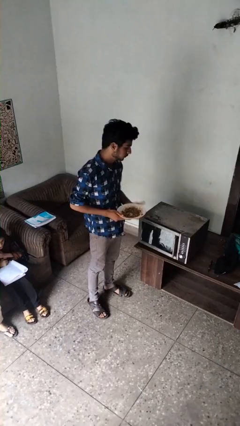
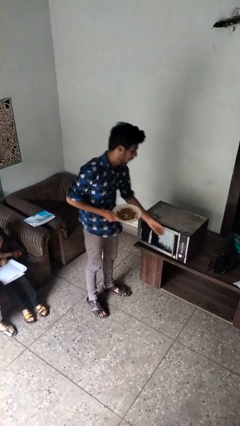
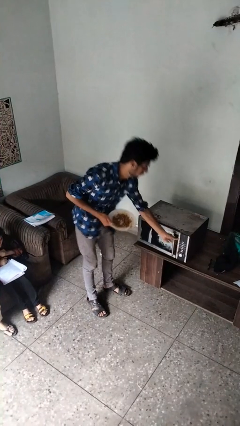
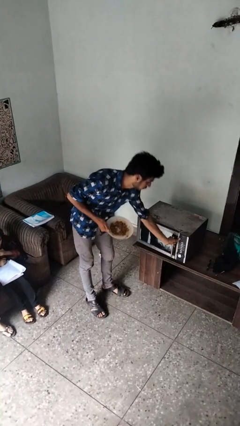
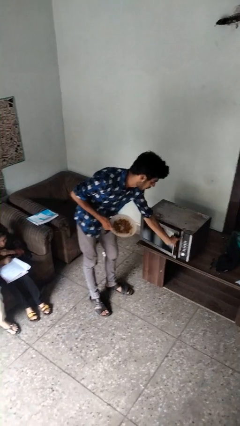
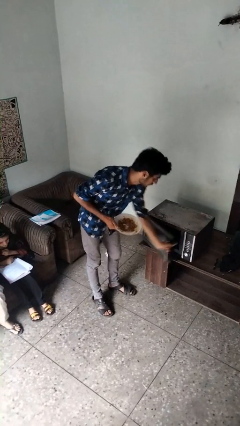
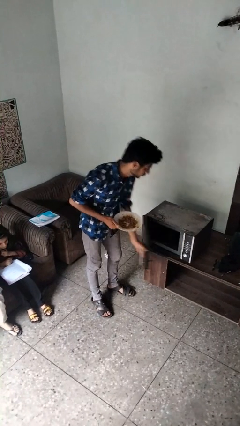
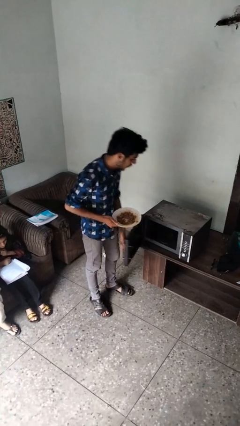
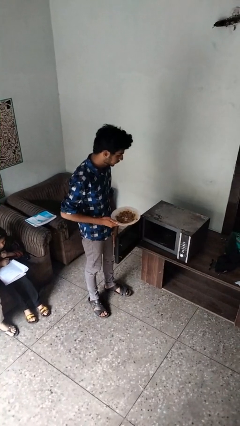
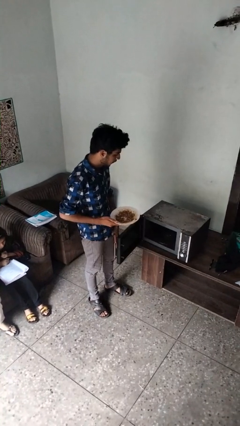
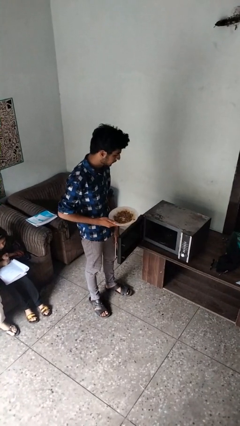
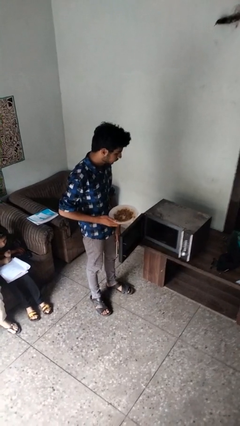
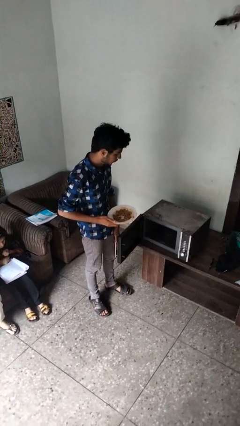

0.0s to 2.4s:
person opens microwave

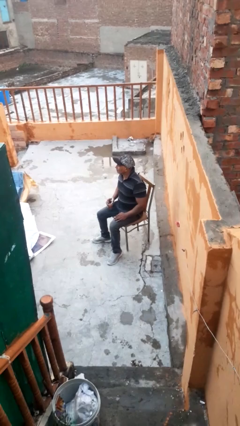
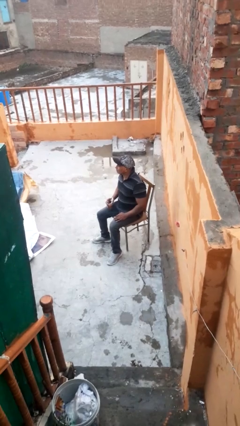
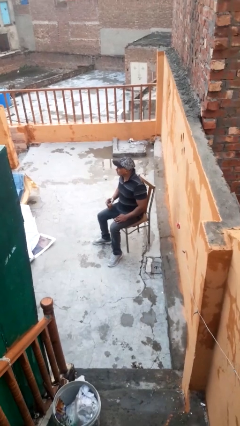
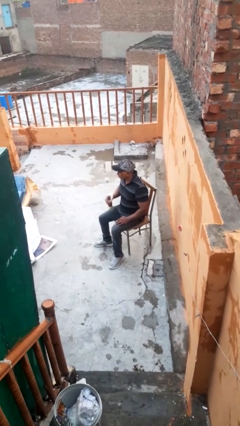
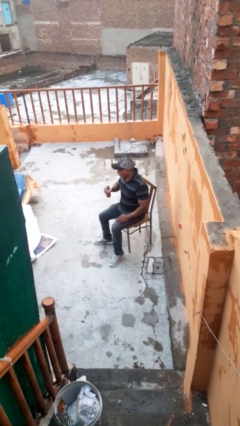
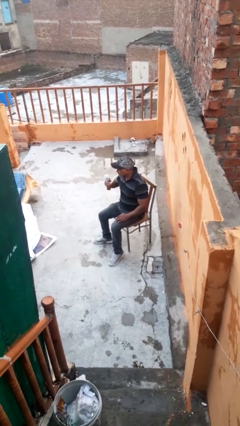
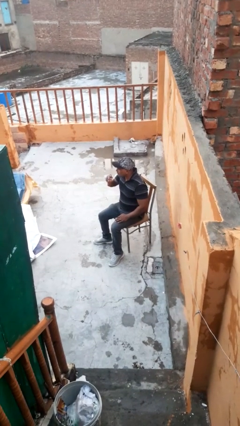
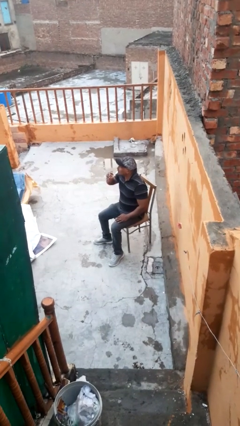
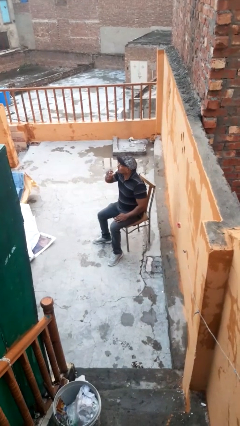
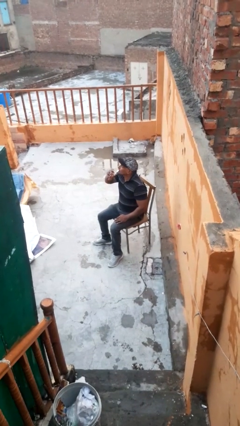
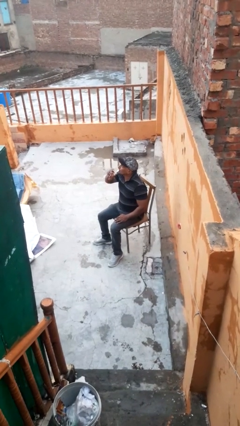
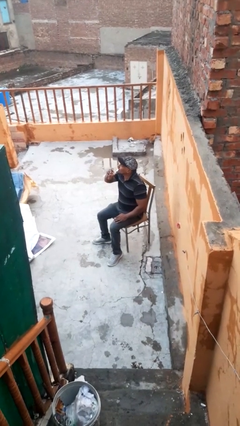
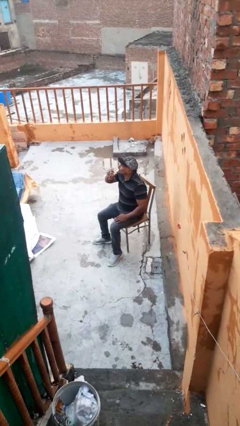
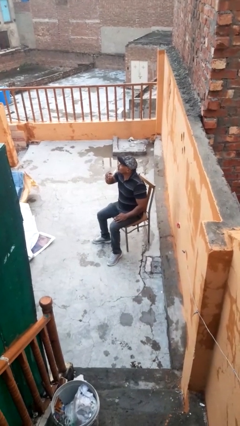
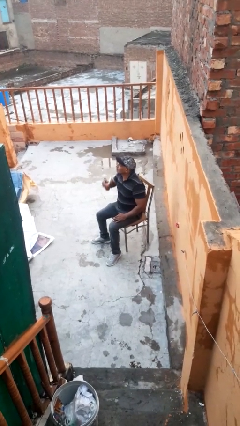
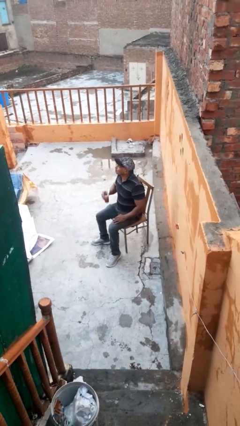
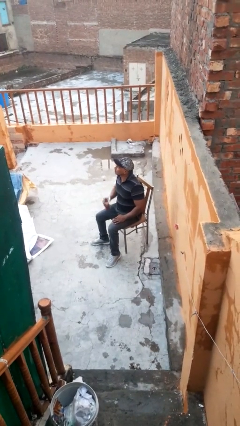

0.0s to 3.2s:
person drinks from straw

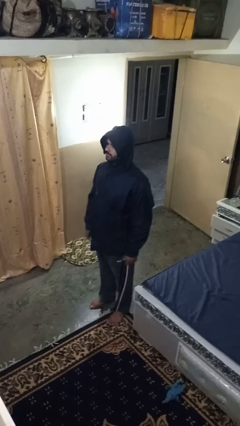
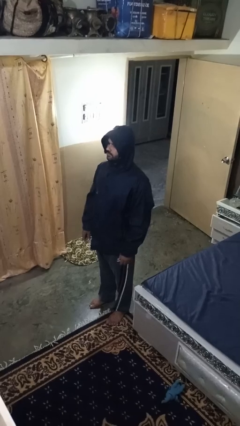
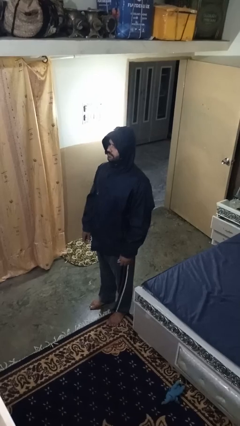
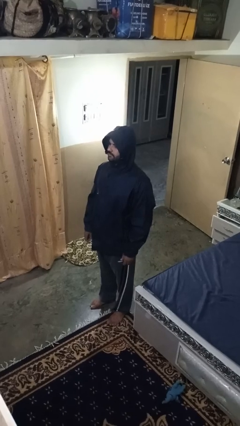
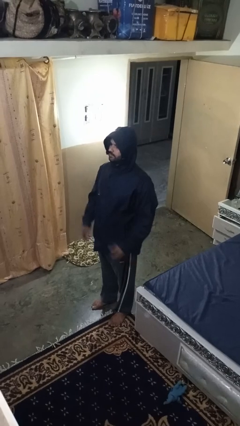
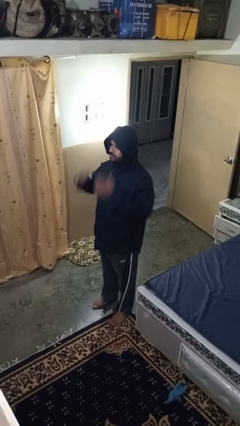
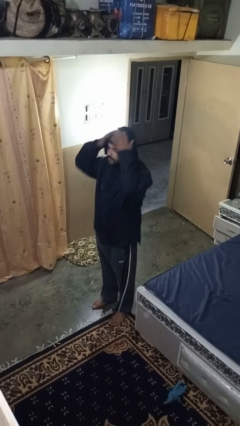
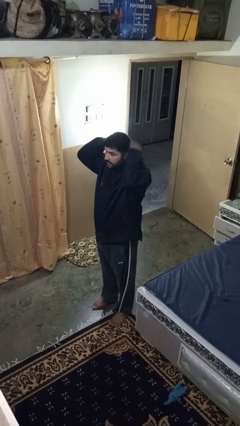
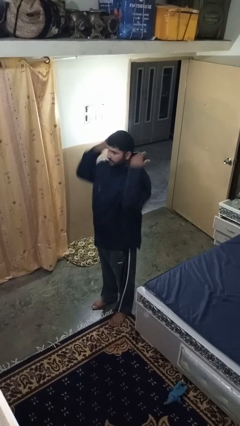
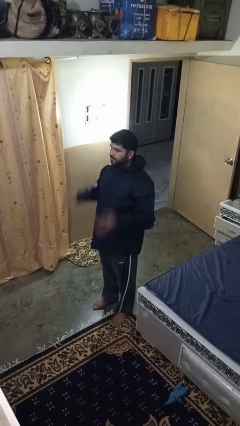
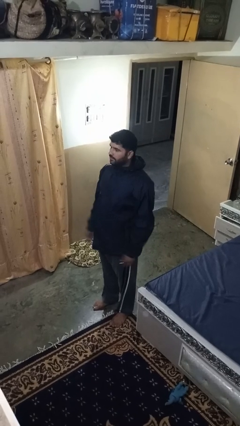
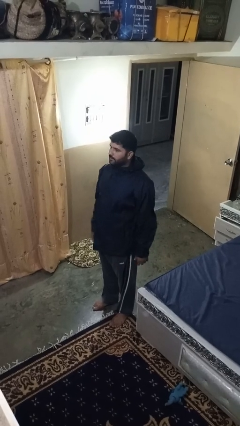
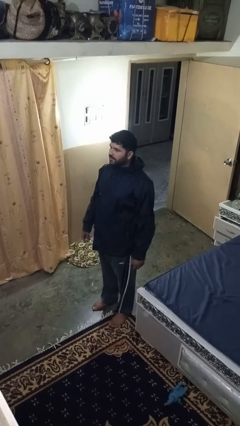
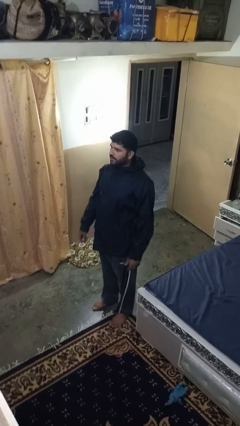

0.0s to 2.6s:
person takes off hoodie

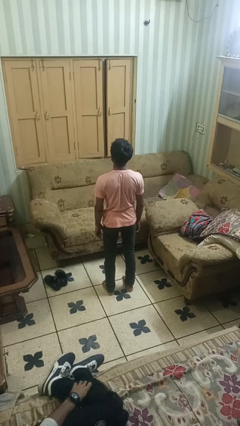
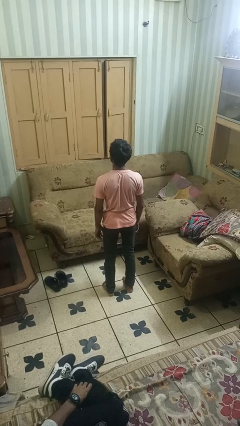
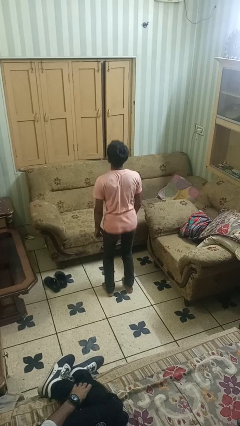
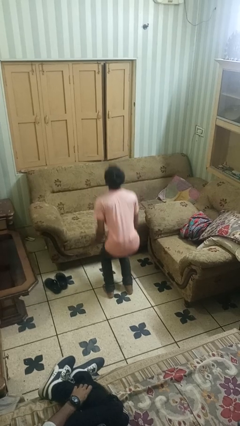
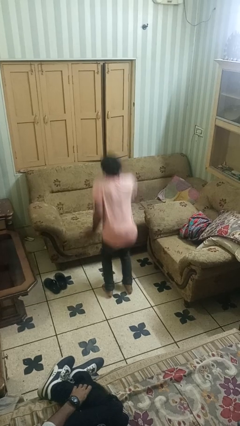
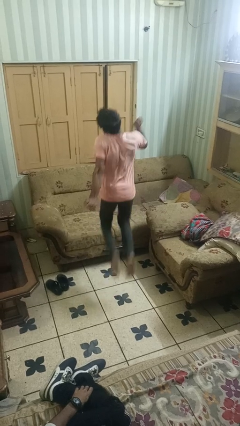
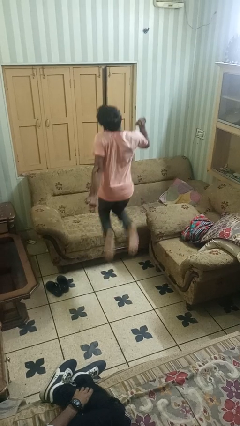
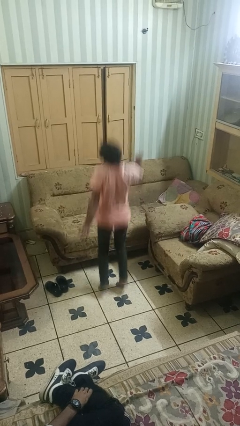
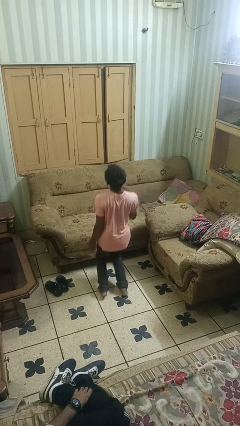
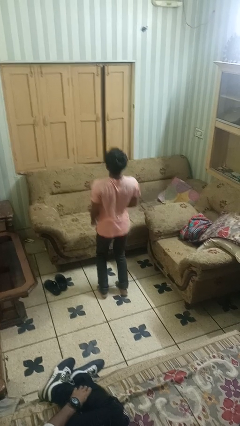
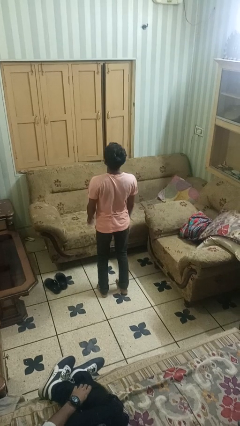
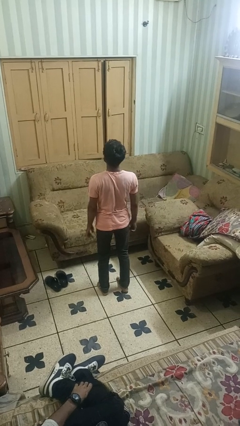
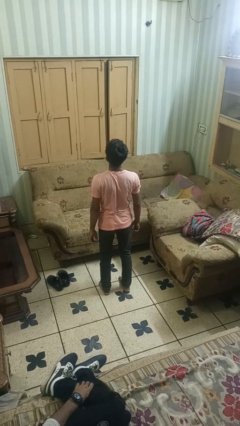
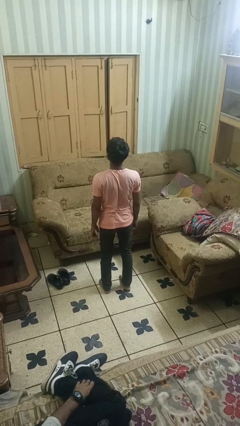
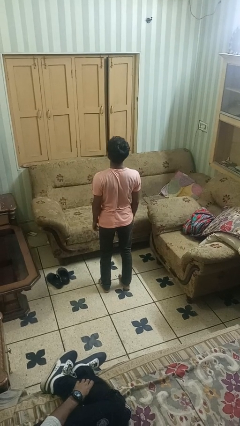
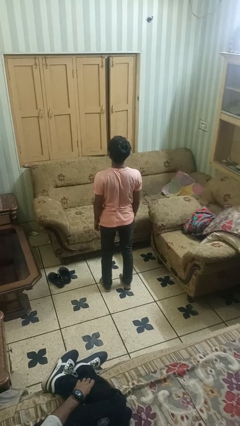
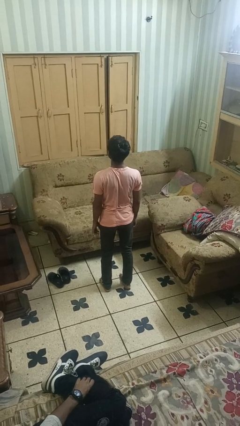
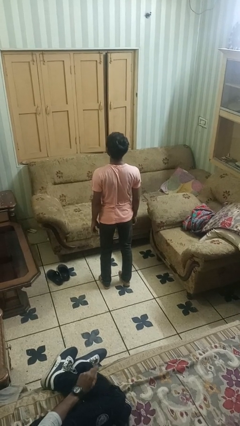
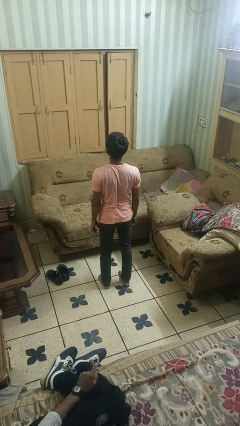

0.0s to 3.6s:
person jumps

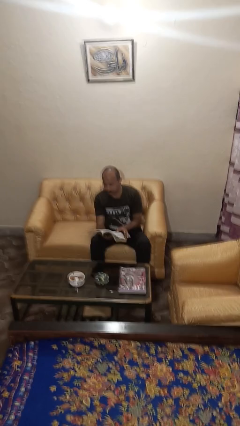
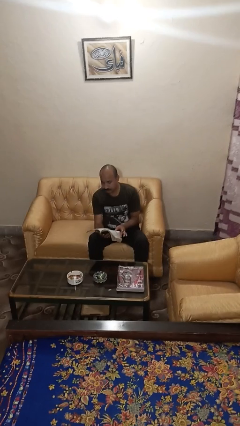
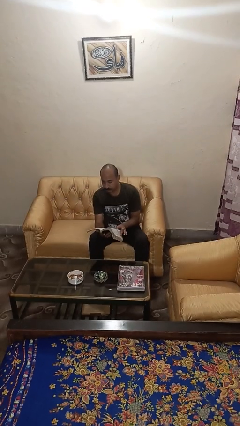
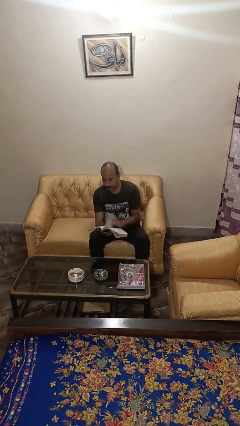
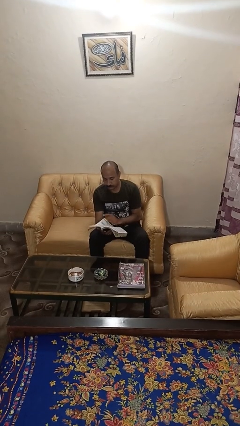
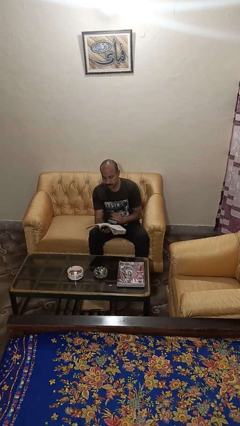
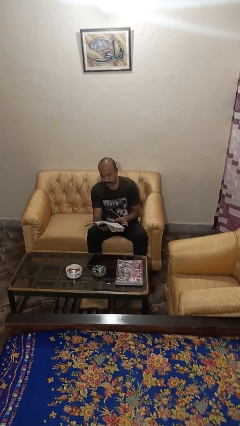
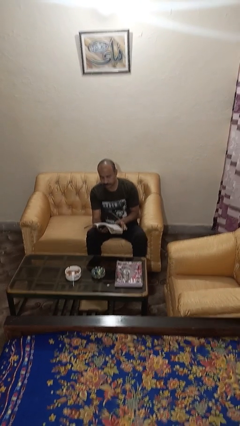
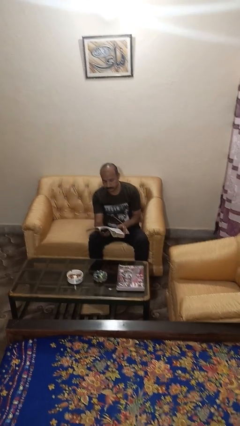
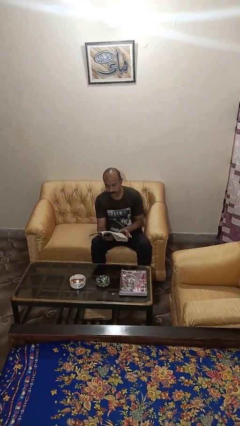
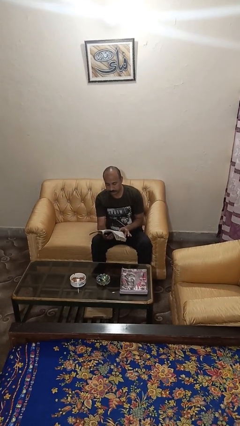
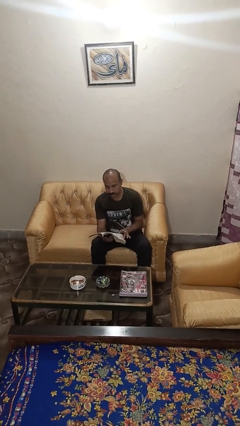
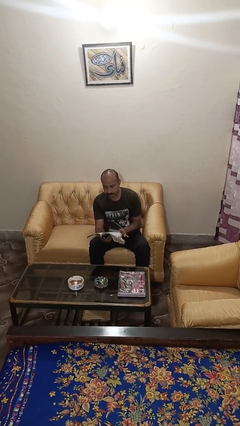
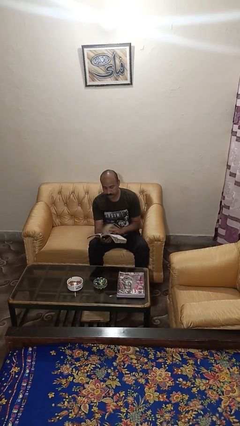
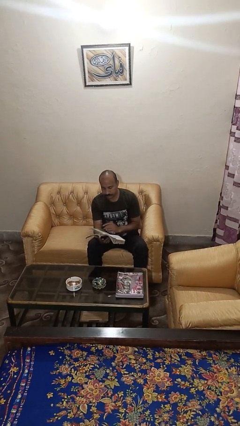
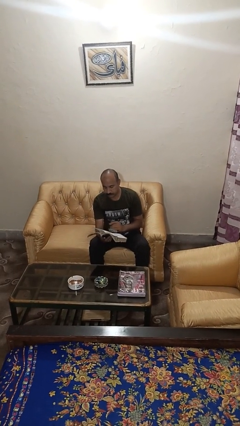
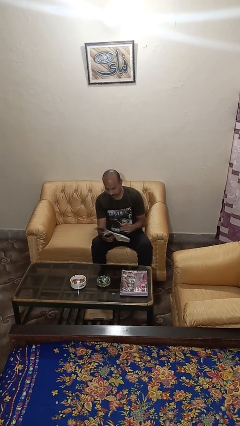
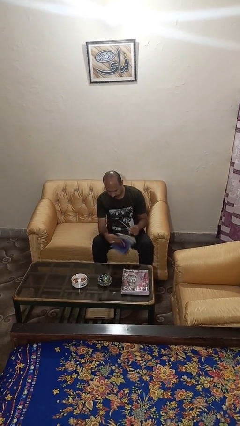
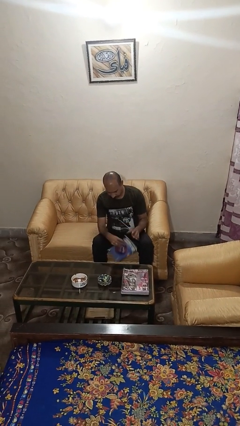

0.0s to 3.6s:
person reads book

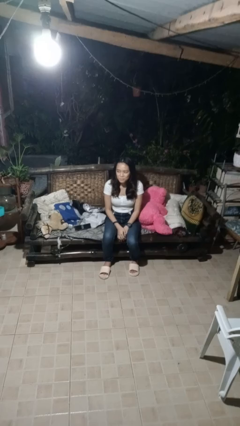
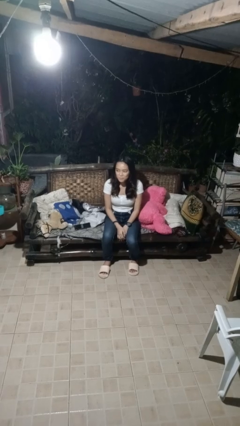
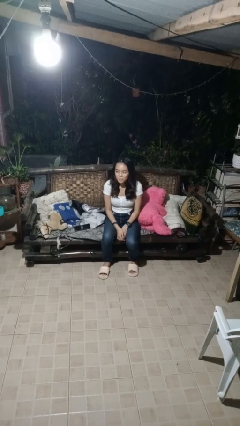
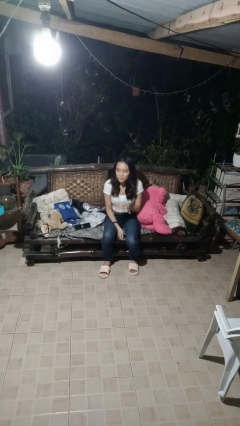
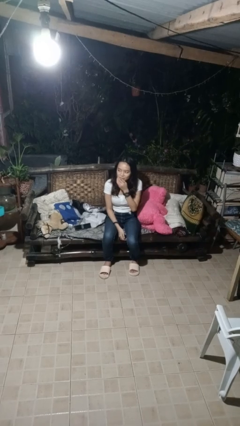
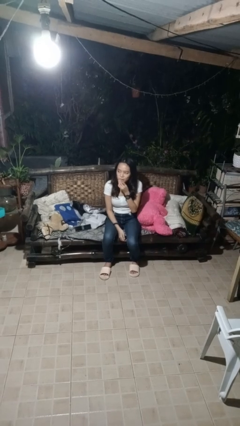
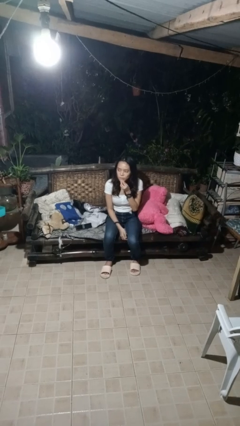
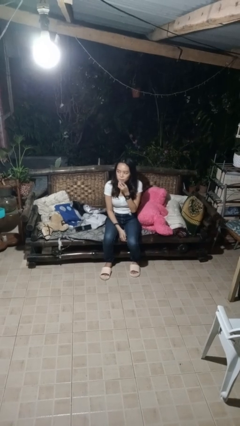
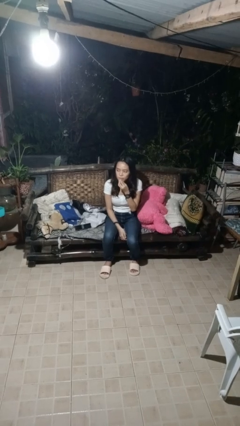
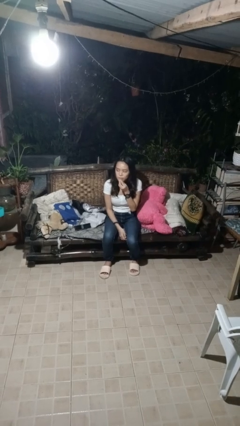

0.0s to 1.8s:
person strokes chin

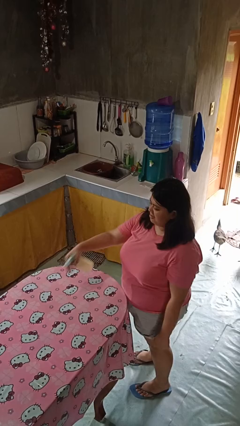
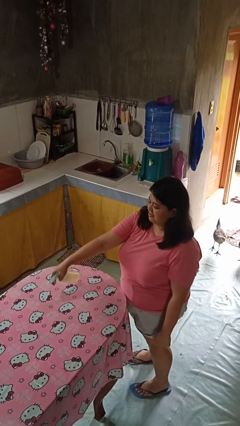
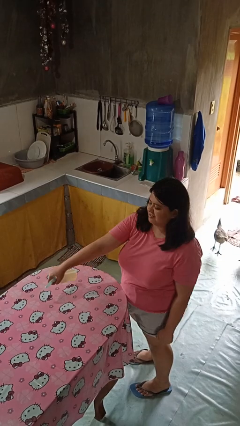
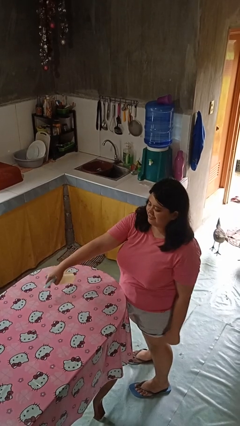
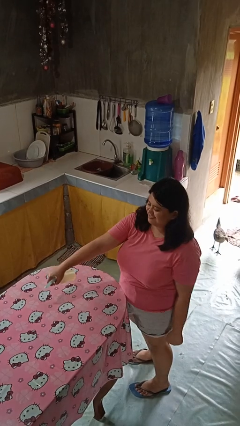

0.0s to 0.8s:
person sprays from bottle
